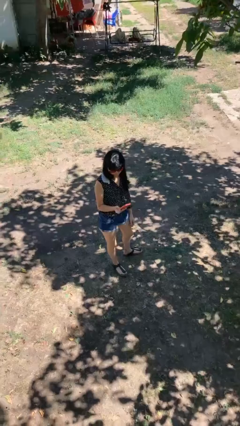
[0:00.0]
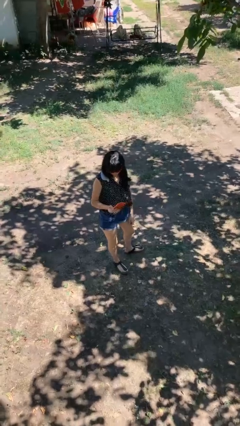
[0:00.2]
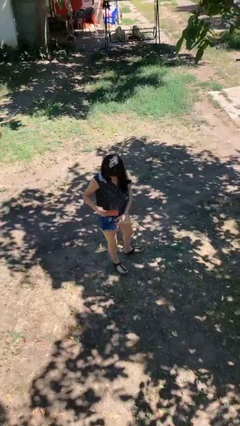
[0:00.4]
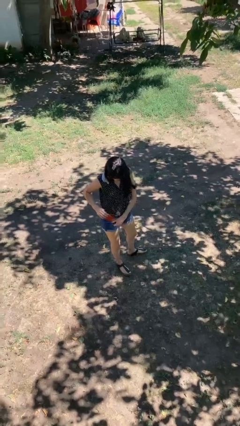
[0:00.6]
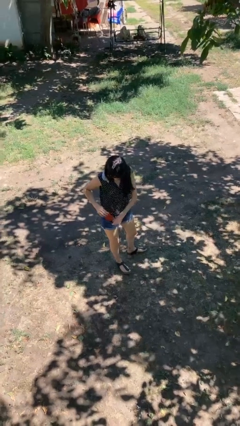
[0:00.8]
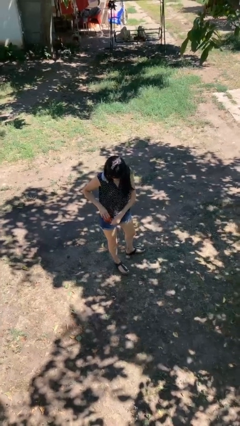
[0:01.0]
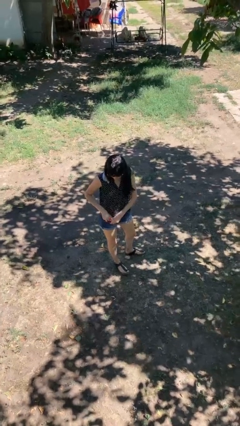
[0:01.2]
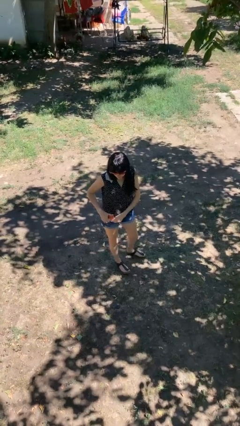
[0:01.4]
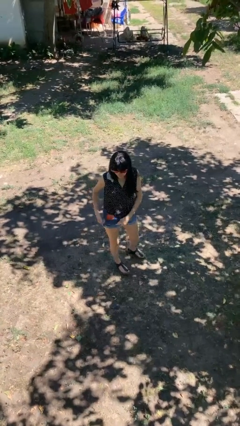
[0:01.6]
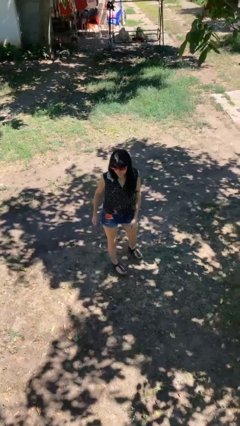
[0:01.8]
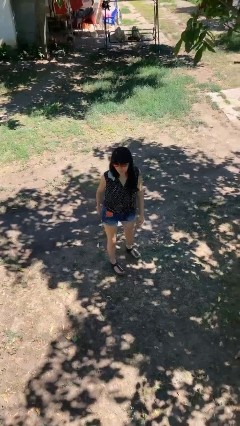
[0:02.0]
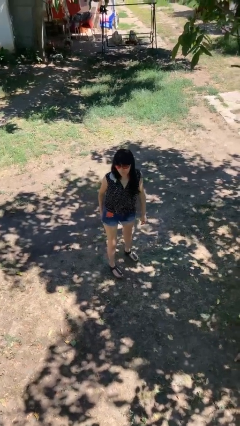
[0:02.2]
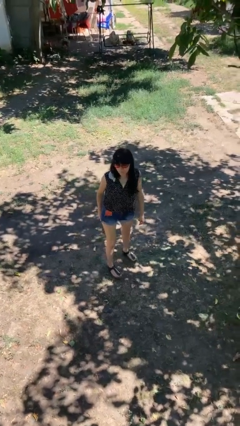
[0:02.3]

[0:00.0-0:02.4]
person puts phone into pocket

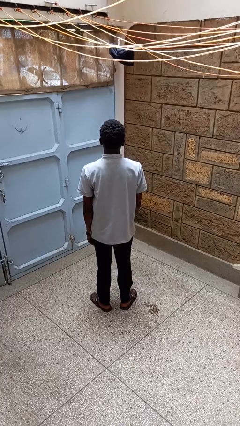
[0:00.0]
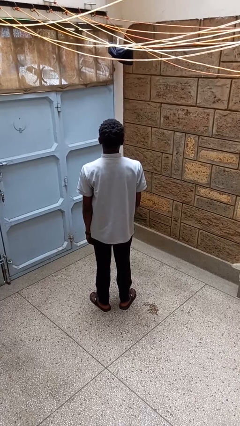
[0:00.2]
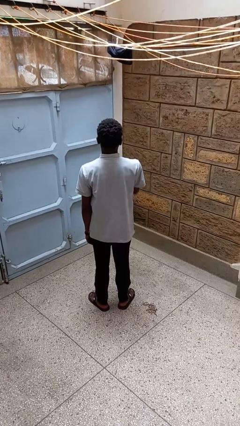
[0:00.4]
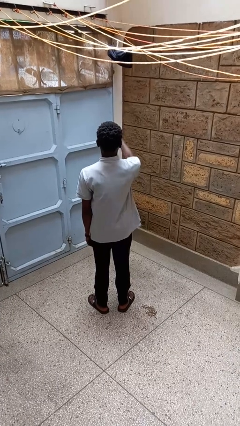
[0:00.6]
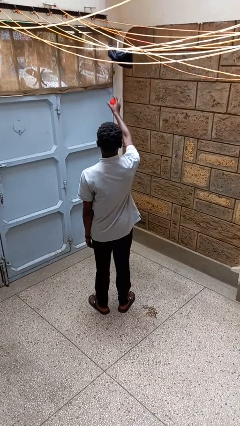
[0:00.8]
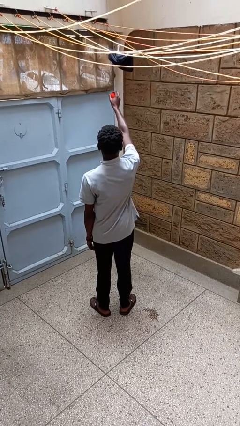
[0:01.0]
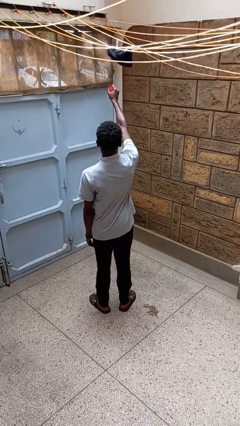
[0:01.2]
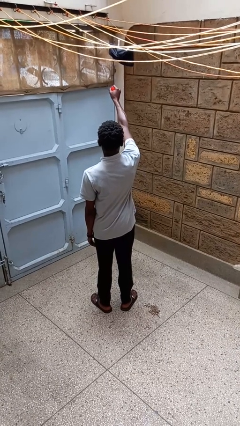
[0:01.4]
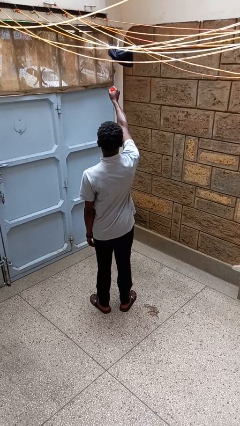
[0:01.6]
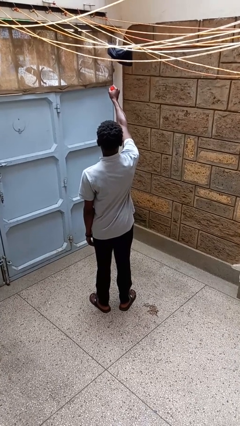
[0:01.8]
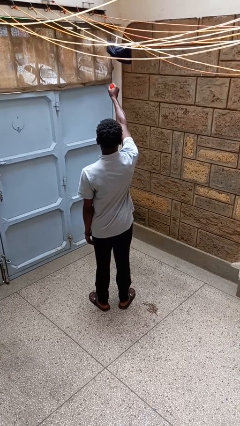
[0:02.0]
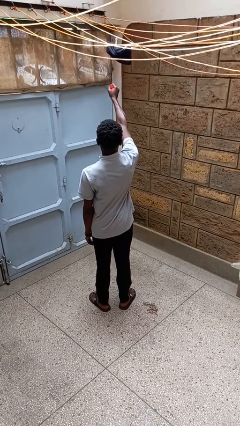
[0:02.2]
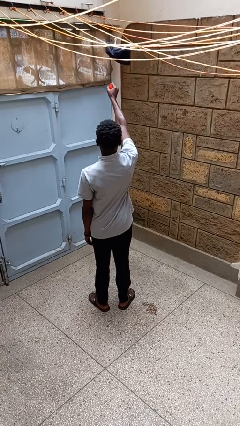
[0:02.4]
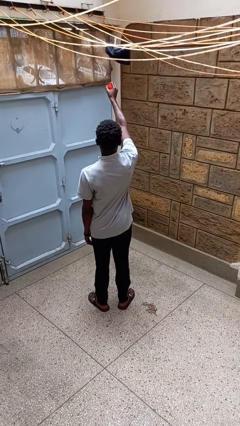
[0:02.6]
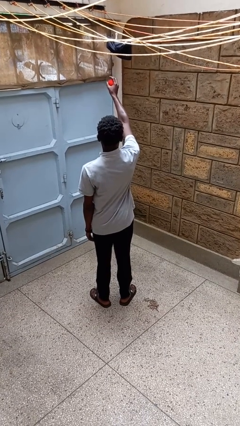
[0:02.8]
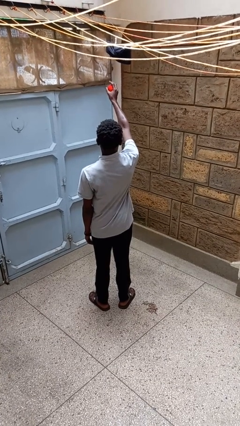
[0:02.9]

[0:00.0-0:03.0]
person squeezes object

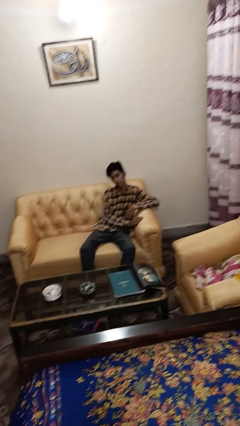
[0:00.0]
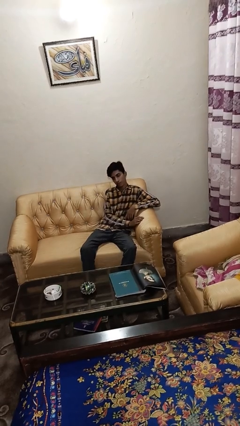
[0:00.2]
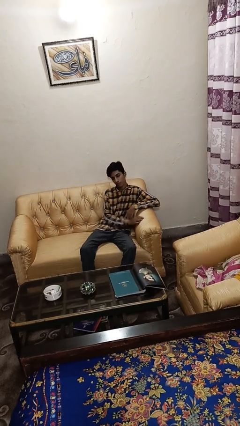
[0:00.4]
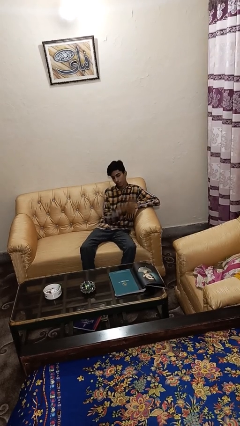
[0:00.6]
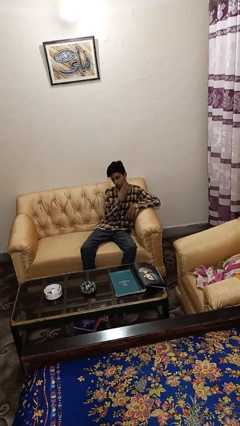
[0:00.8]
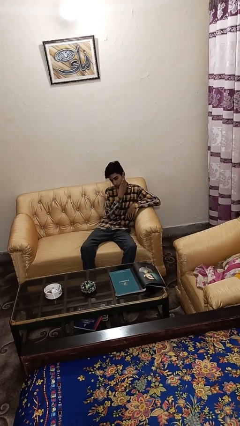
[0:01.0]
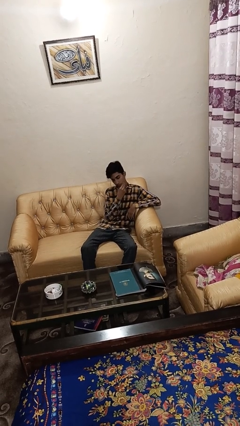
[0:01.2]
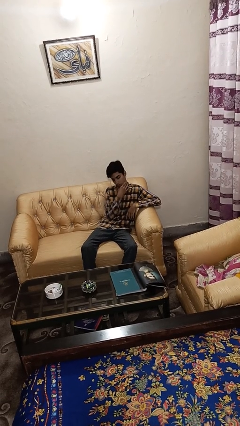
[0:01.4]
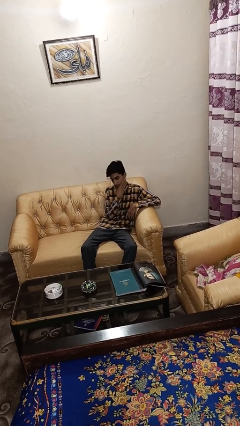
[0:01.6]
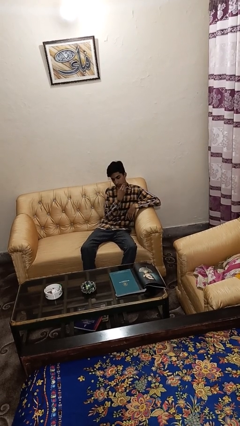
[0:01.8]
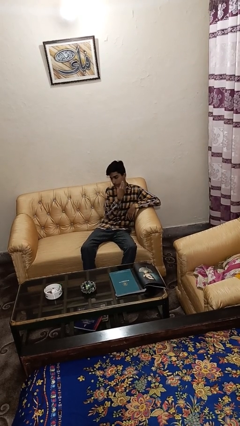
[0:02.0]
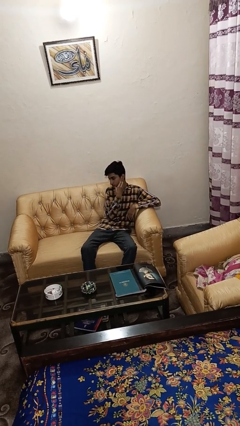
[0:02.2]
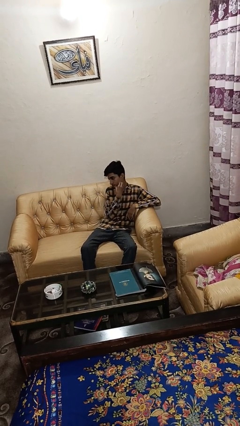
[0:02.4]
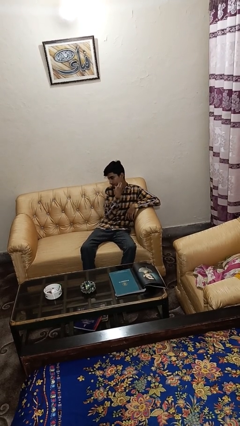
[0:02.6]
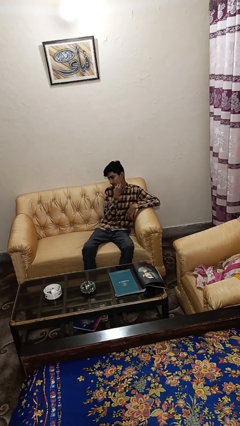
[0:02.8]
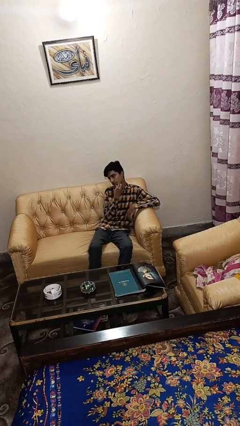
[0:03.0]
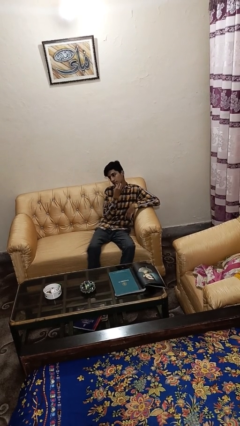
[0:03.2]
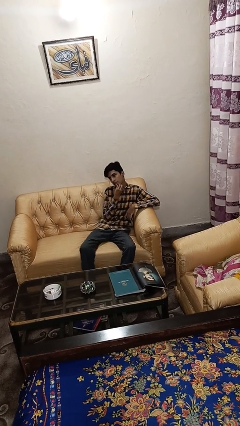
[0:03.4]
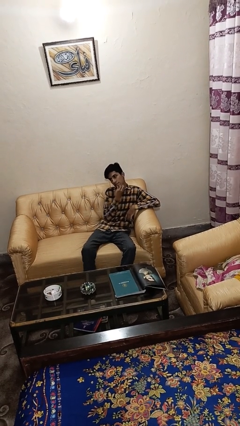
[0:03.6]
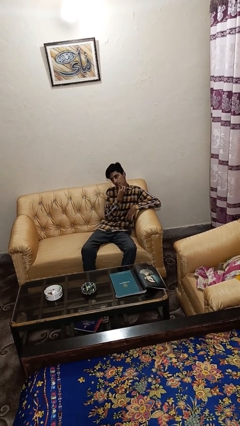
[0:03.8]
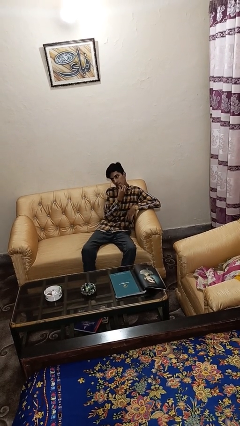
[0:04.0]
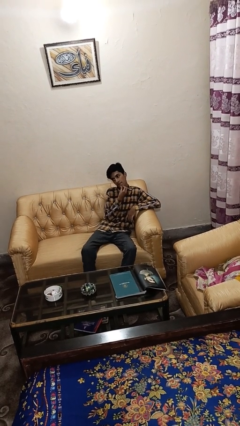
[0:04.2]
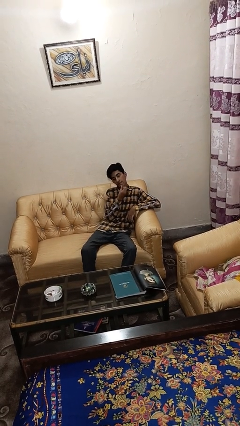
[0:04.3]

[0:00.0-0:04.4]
person strokes chin

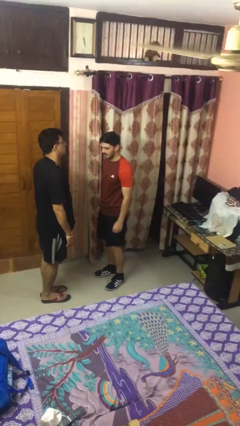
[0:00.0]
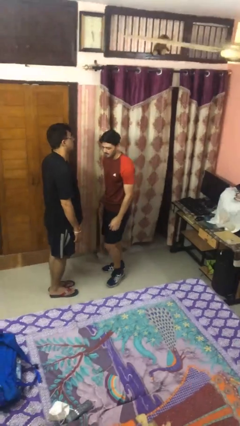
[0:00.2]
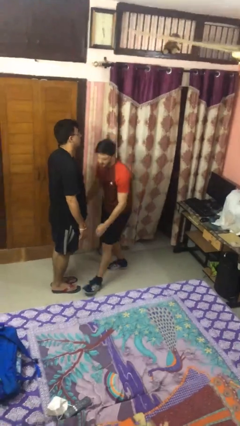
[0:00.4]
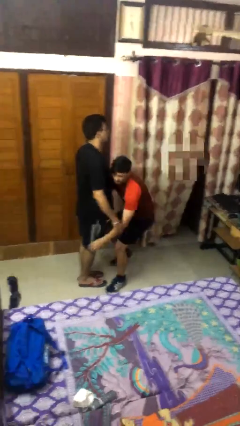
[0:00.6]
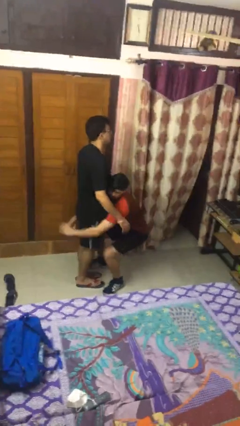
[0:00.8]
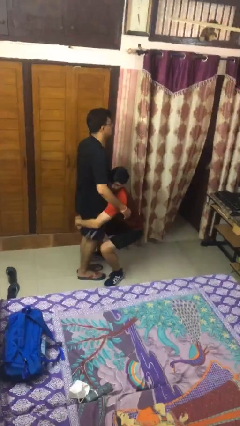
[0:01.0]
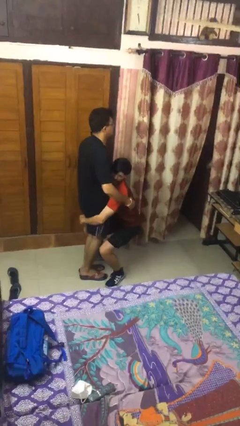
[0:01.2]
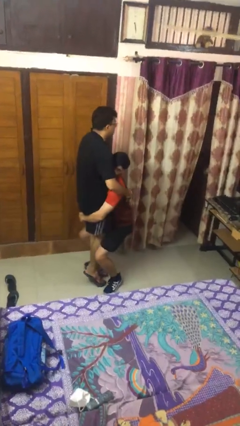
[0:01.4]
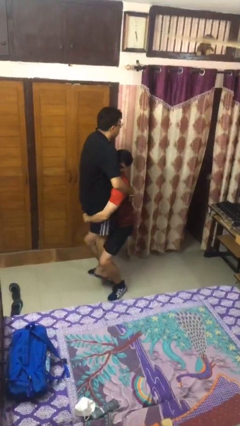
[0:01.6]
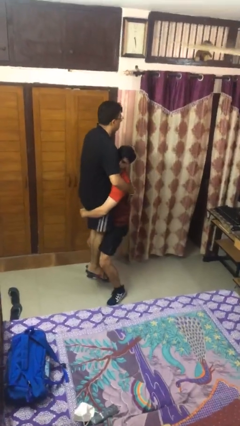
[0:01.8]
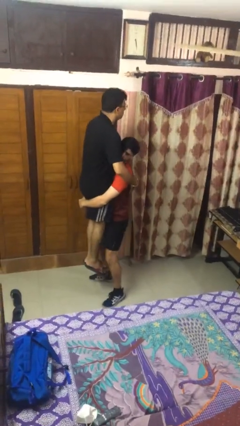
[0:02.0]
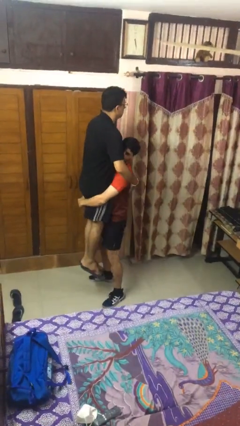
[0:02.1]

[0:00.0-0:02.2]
person picks up person

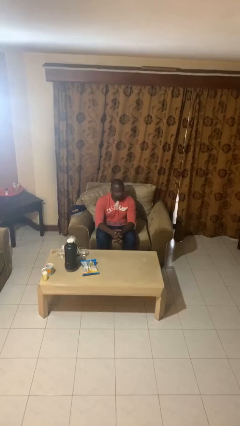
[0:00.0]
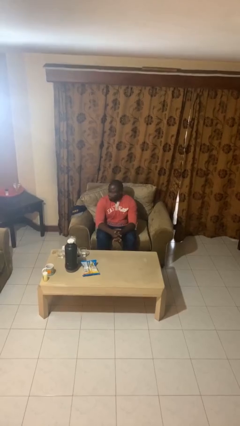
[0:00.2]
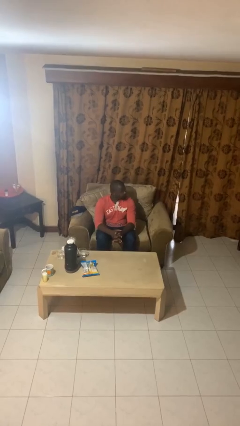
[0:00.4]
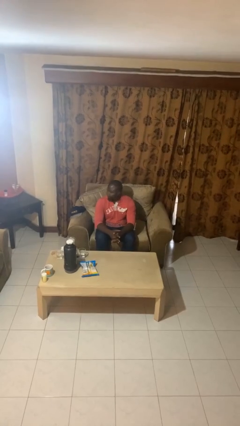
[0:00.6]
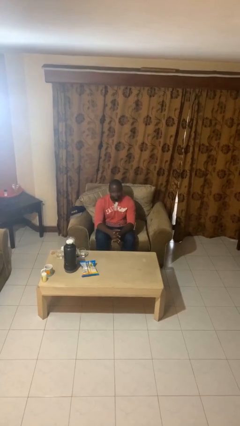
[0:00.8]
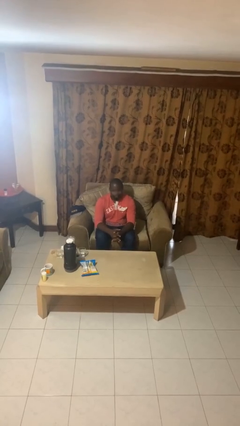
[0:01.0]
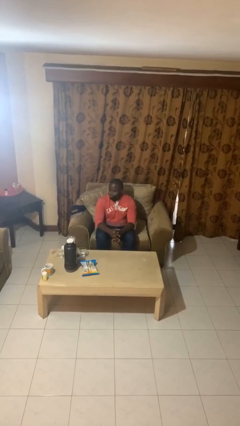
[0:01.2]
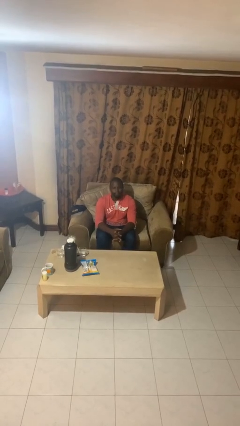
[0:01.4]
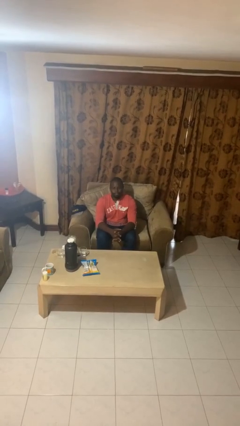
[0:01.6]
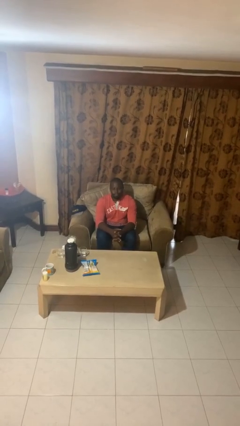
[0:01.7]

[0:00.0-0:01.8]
person shakes head

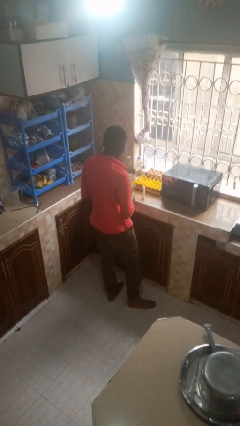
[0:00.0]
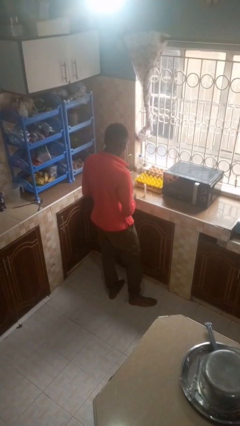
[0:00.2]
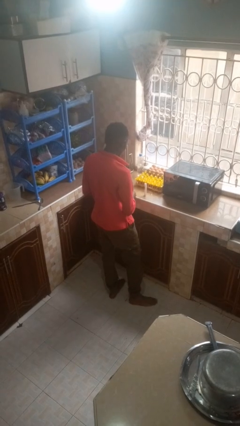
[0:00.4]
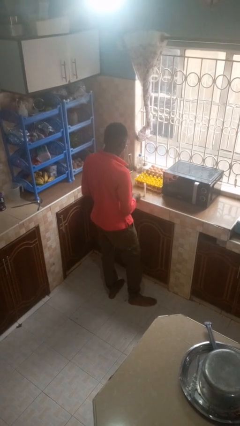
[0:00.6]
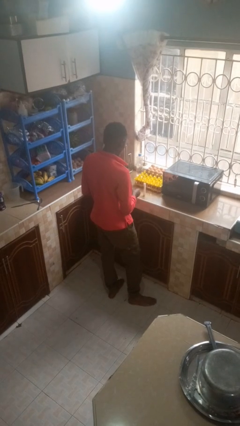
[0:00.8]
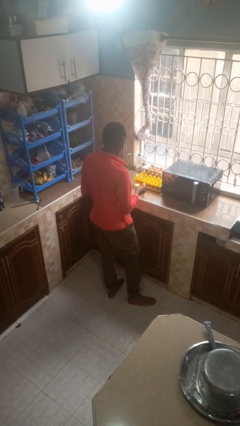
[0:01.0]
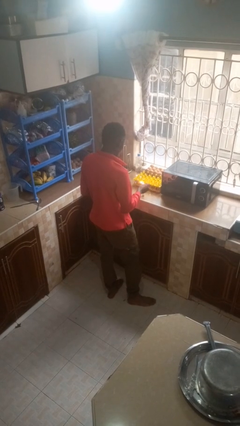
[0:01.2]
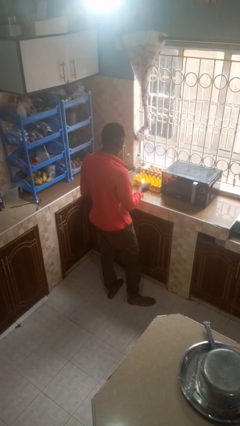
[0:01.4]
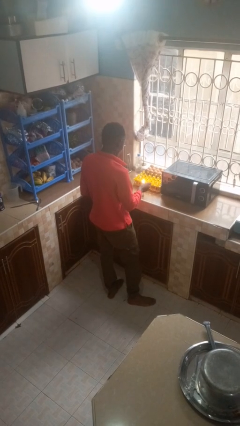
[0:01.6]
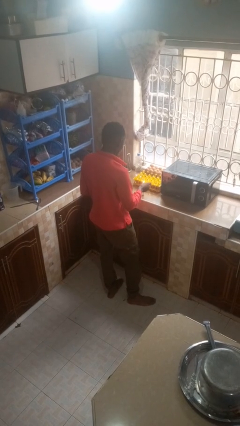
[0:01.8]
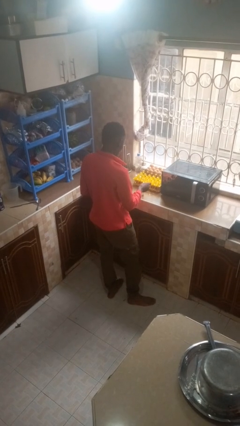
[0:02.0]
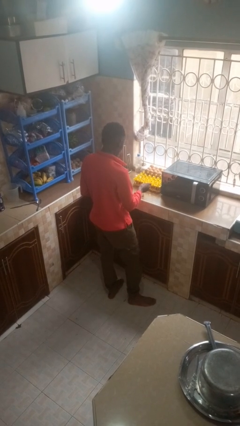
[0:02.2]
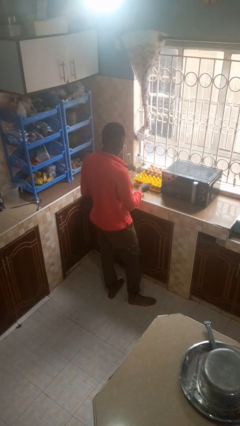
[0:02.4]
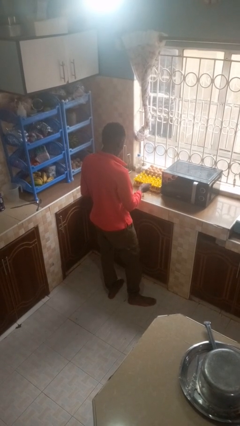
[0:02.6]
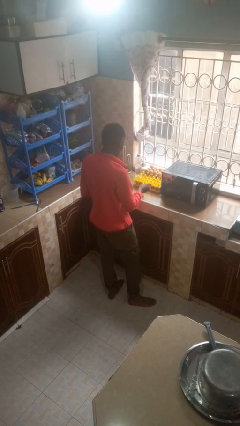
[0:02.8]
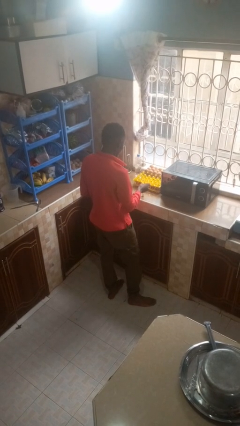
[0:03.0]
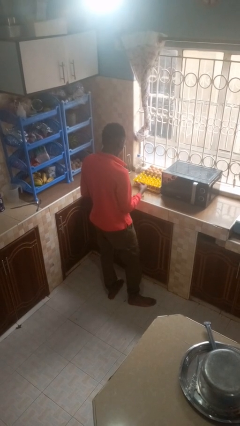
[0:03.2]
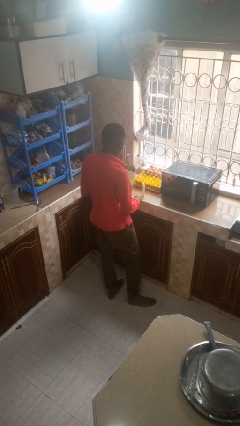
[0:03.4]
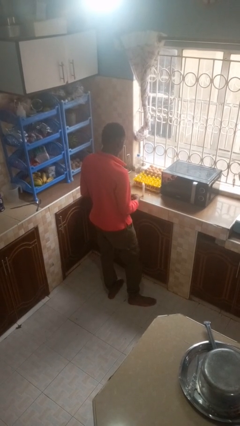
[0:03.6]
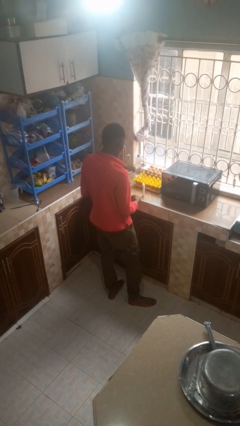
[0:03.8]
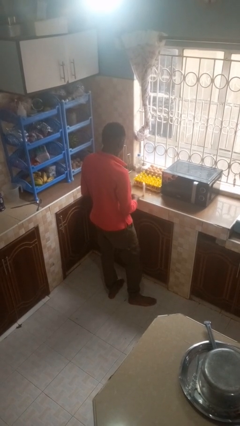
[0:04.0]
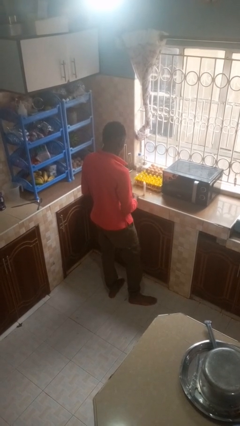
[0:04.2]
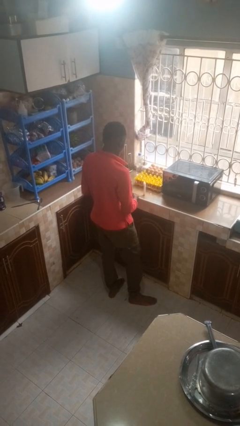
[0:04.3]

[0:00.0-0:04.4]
person lights candle
